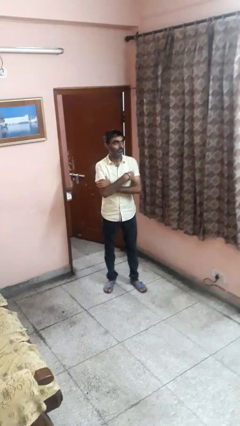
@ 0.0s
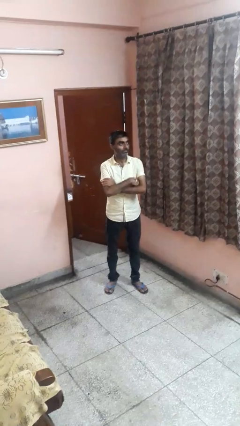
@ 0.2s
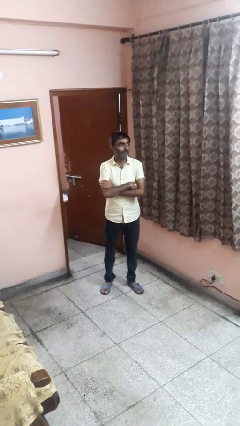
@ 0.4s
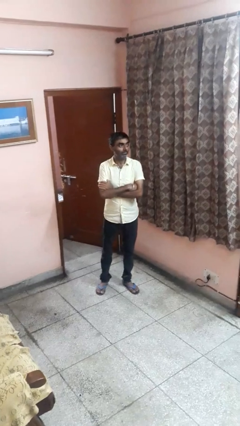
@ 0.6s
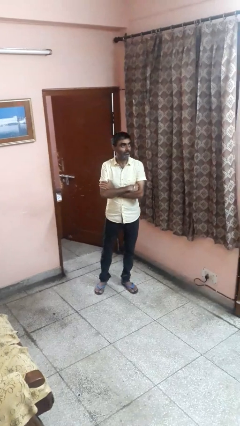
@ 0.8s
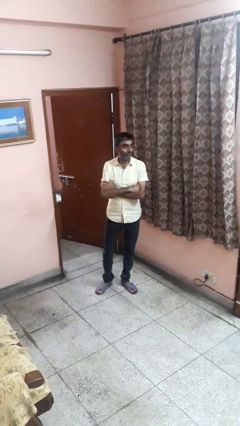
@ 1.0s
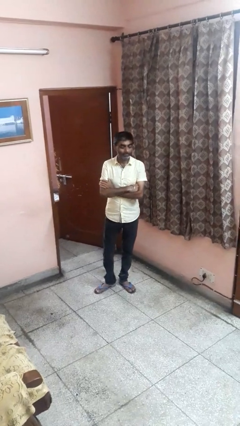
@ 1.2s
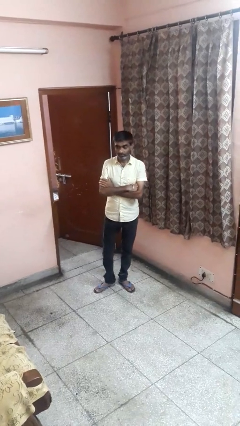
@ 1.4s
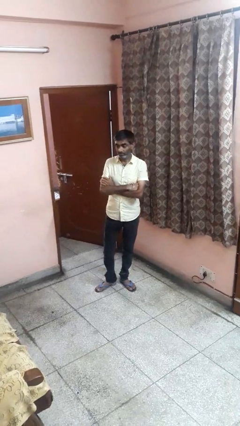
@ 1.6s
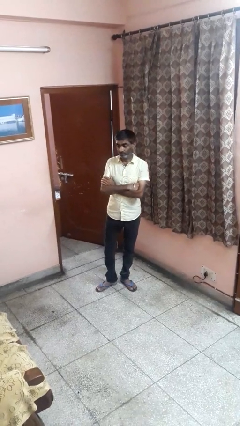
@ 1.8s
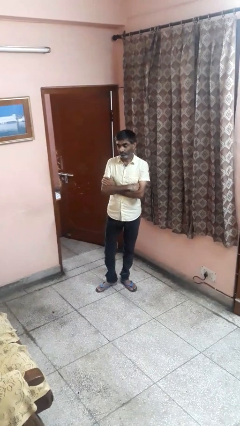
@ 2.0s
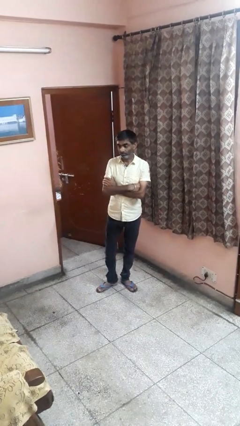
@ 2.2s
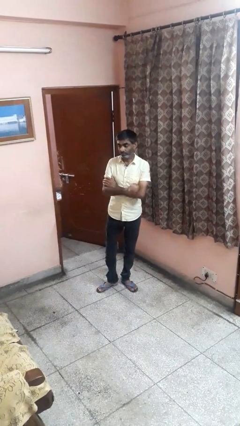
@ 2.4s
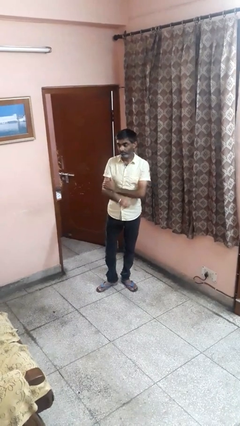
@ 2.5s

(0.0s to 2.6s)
person crosses arms

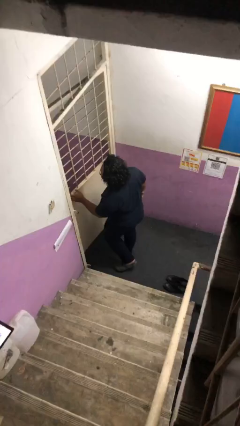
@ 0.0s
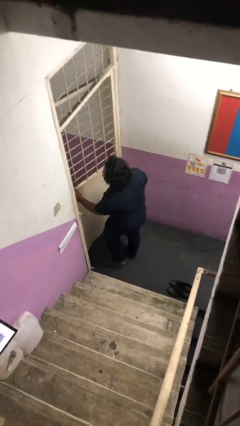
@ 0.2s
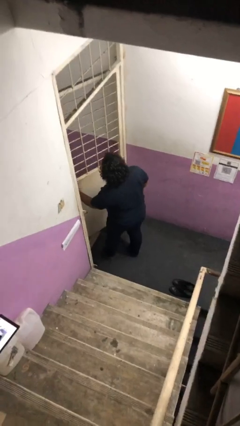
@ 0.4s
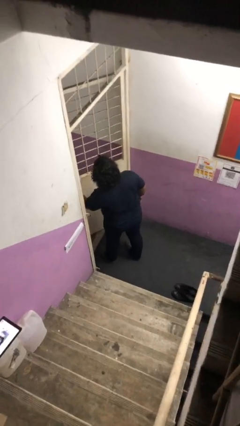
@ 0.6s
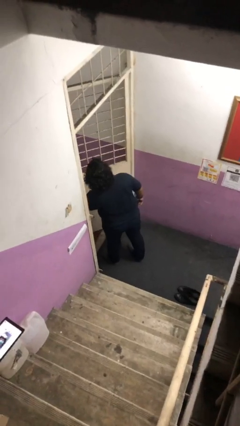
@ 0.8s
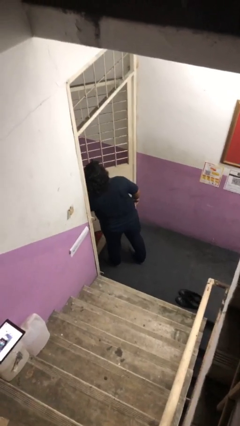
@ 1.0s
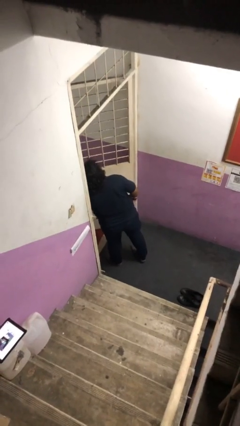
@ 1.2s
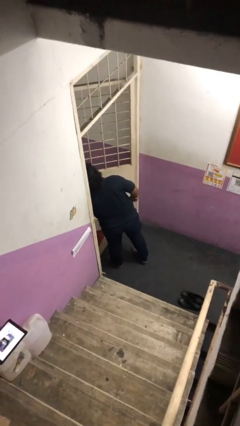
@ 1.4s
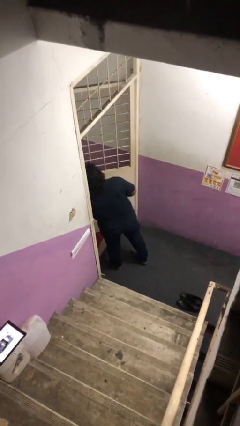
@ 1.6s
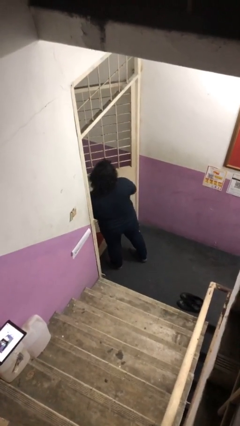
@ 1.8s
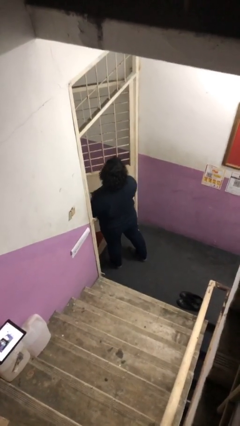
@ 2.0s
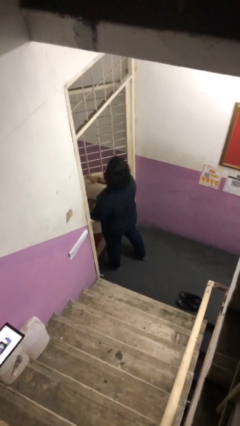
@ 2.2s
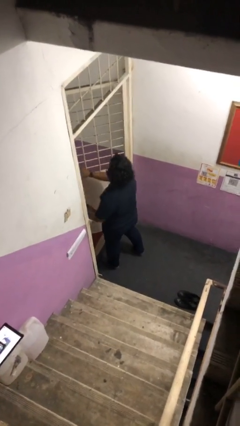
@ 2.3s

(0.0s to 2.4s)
person opens facility door

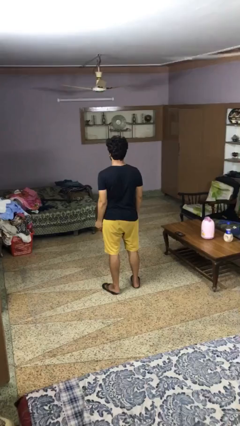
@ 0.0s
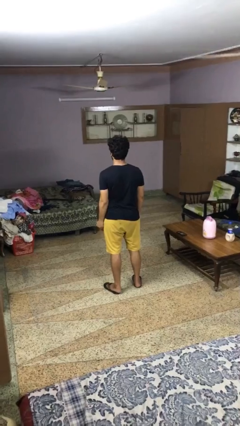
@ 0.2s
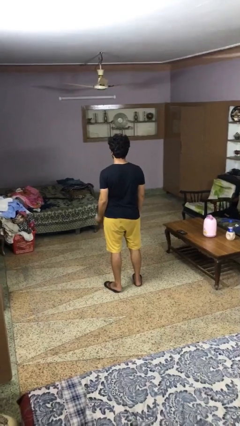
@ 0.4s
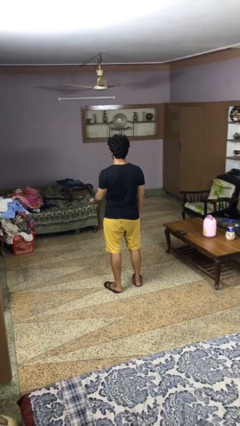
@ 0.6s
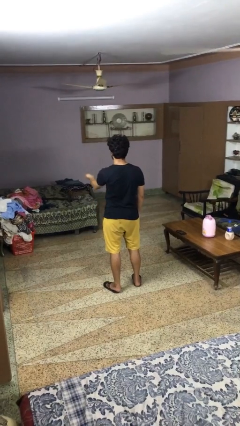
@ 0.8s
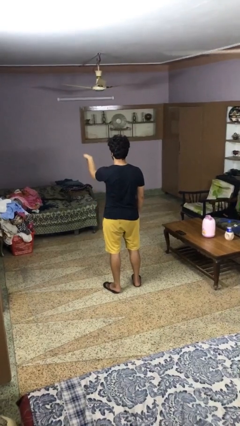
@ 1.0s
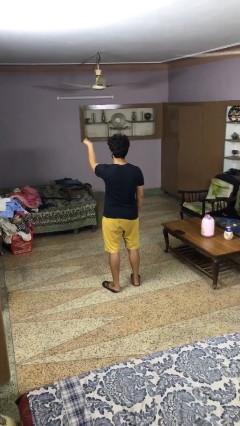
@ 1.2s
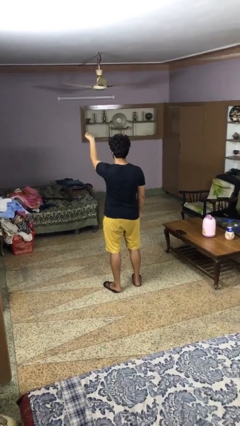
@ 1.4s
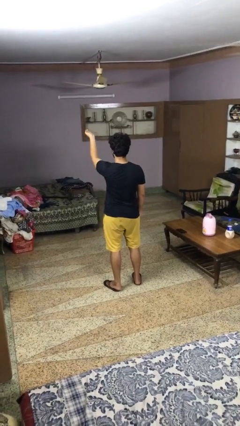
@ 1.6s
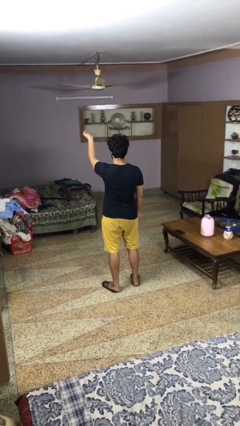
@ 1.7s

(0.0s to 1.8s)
person gestures swipe up

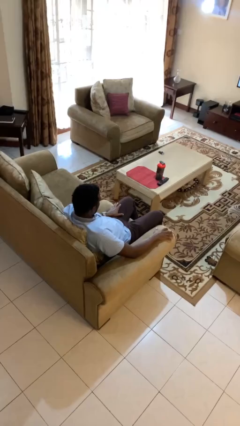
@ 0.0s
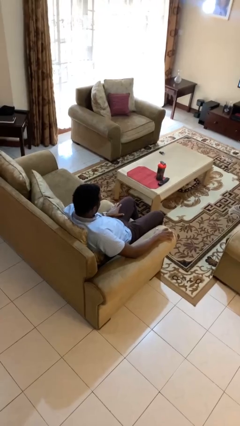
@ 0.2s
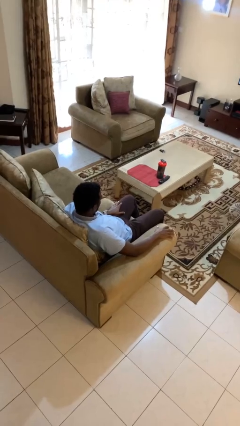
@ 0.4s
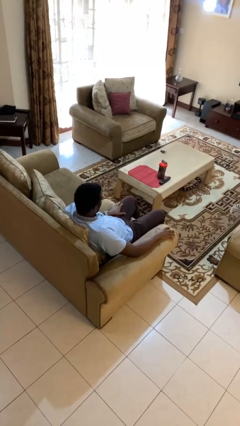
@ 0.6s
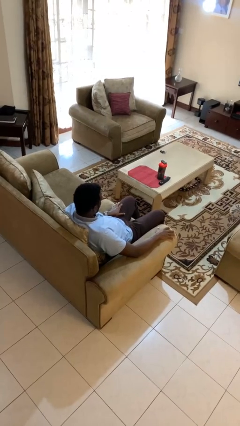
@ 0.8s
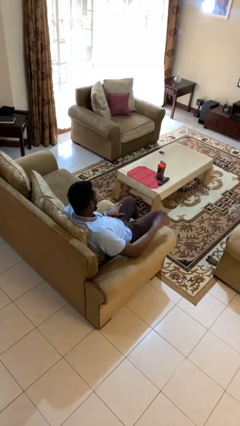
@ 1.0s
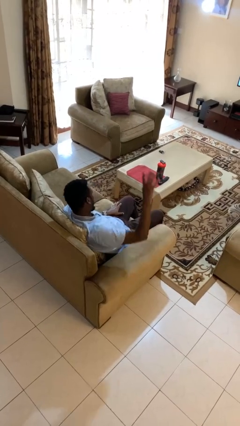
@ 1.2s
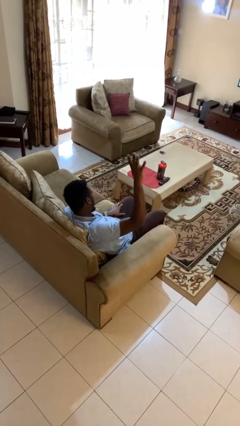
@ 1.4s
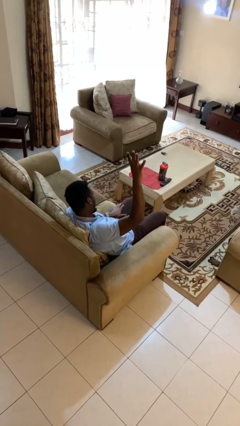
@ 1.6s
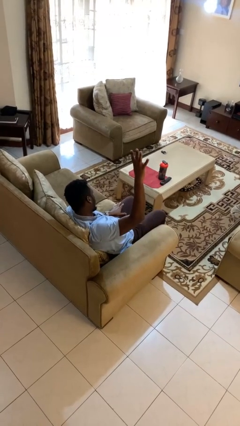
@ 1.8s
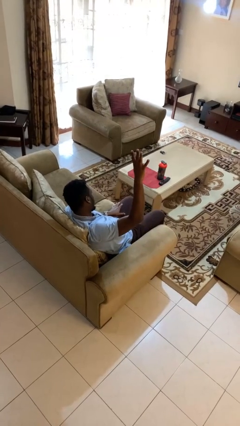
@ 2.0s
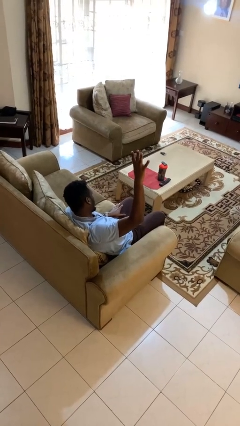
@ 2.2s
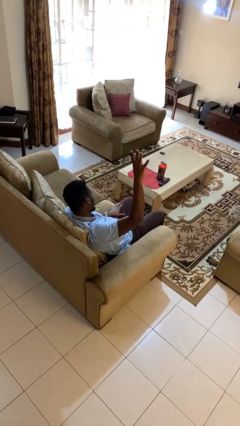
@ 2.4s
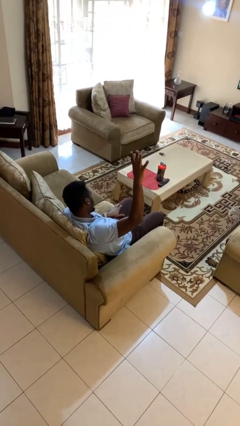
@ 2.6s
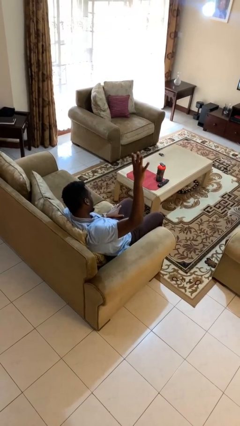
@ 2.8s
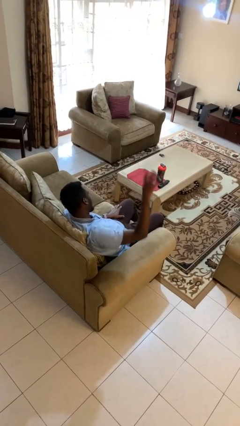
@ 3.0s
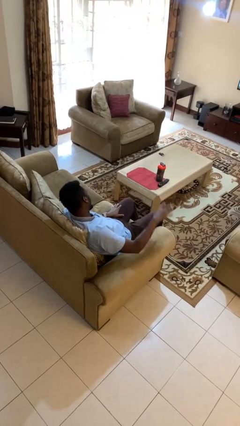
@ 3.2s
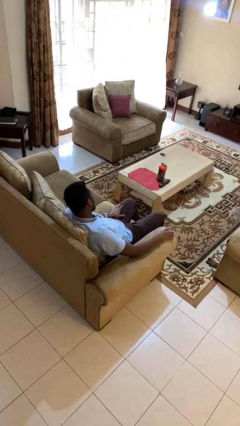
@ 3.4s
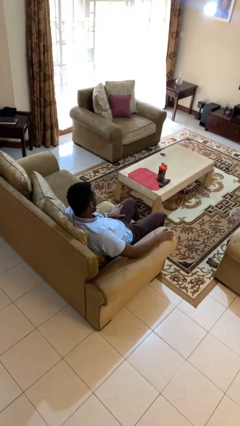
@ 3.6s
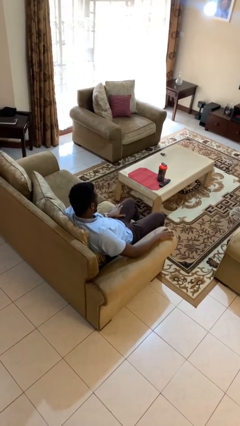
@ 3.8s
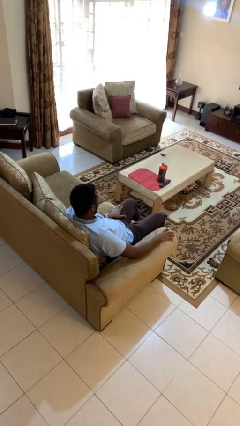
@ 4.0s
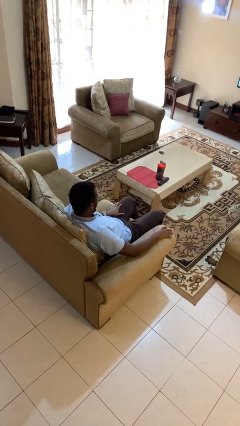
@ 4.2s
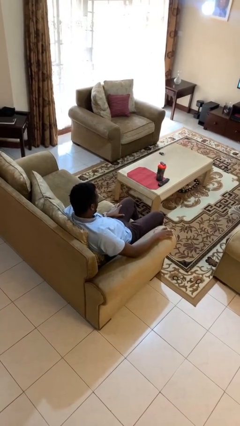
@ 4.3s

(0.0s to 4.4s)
person gestures number four

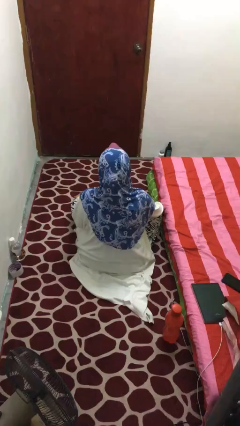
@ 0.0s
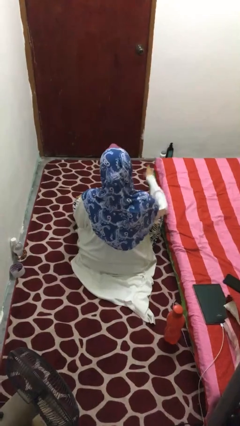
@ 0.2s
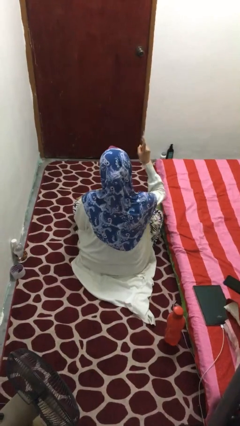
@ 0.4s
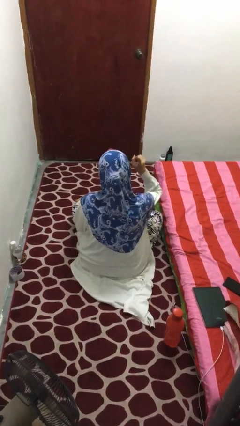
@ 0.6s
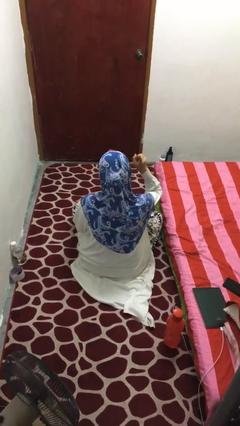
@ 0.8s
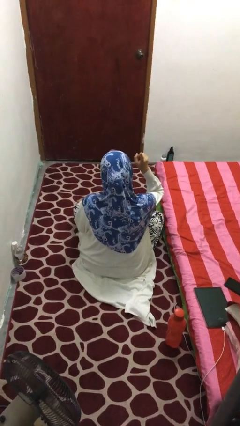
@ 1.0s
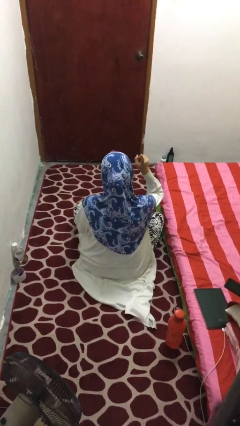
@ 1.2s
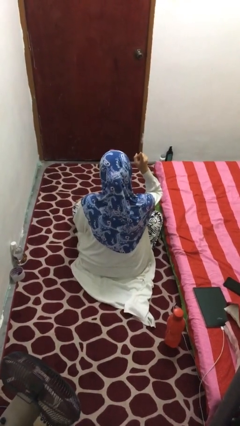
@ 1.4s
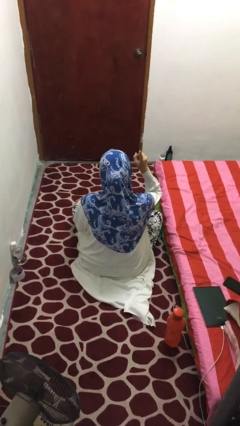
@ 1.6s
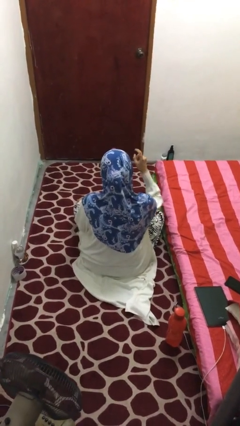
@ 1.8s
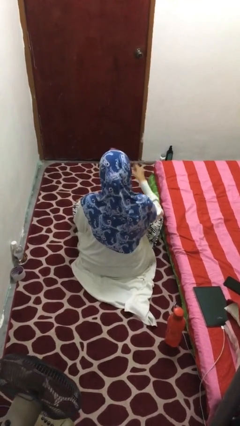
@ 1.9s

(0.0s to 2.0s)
person gestures number one

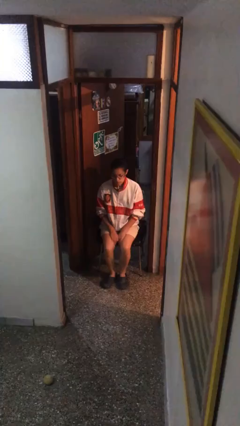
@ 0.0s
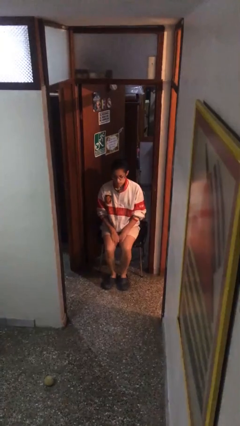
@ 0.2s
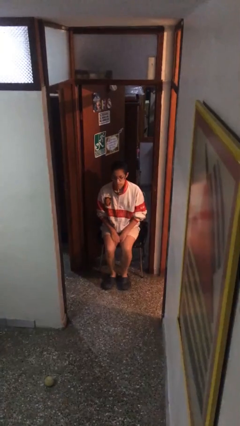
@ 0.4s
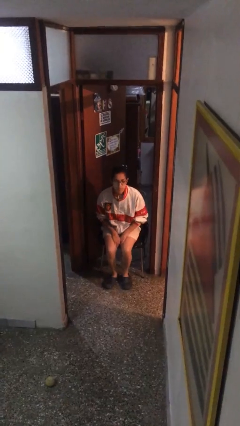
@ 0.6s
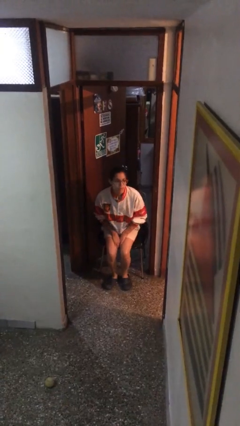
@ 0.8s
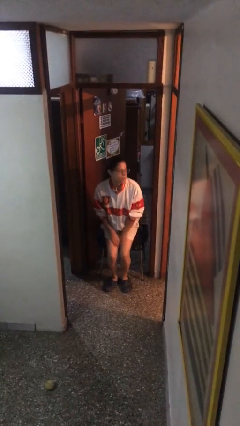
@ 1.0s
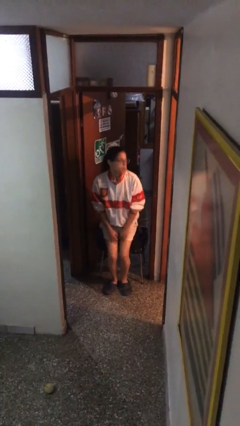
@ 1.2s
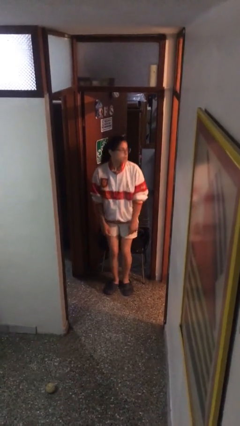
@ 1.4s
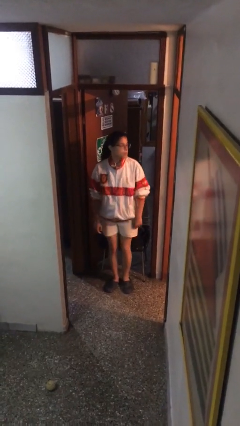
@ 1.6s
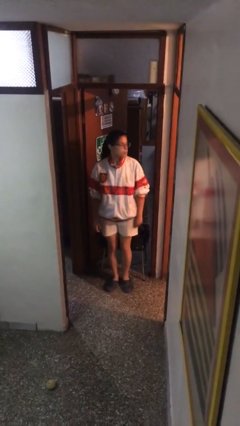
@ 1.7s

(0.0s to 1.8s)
person stands up

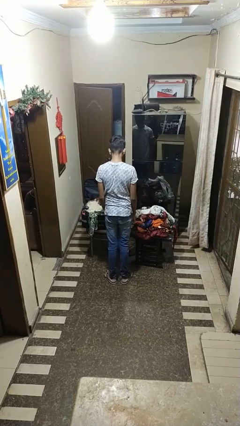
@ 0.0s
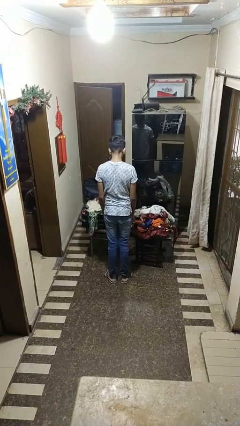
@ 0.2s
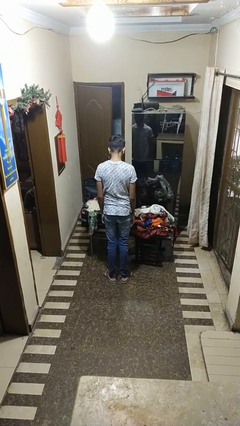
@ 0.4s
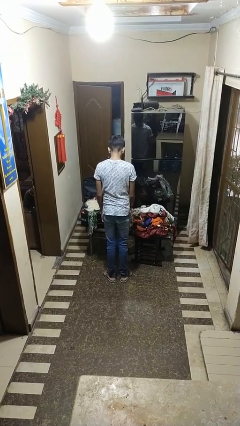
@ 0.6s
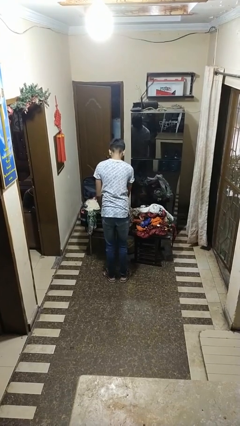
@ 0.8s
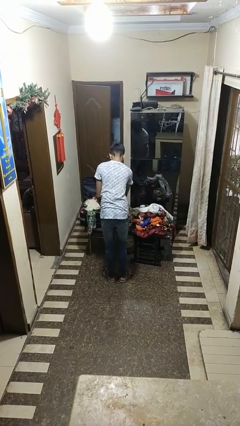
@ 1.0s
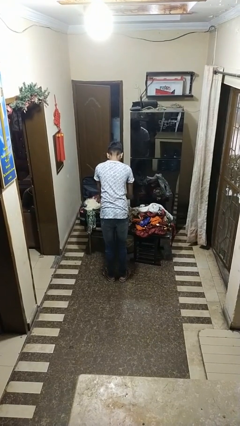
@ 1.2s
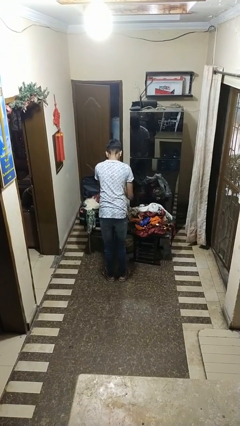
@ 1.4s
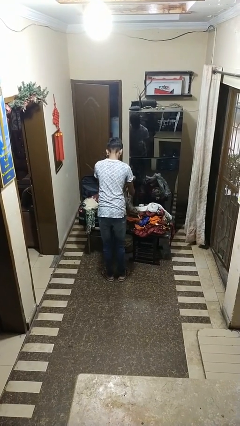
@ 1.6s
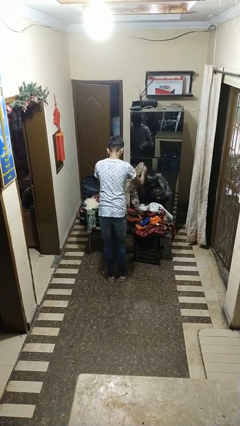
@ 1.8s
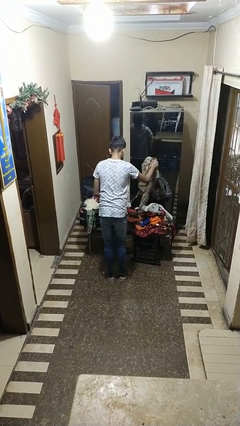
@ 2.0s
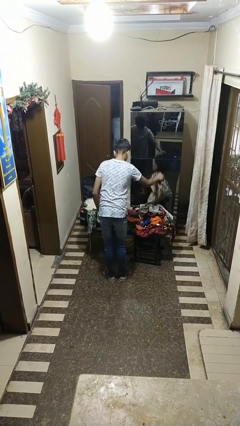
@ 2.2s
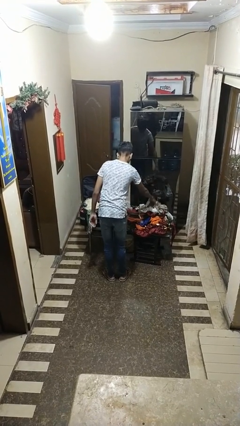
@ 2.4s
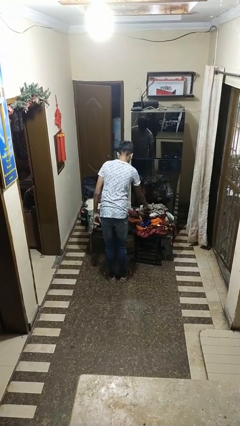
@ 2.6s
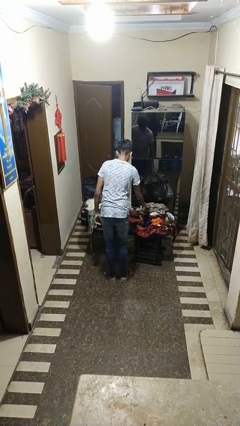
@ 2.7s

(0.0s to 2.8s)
person unloads clothes from suitcase
